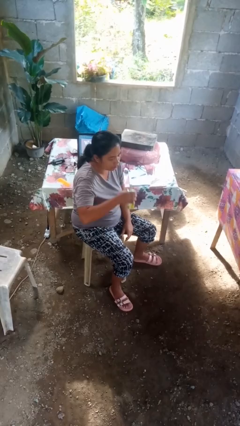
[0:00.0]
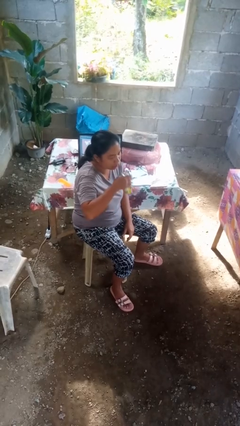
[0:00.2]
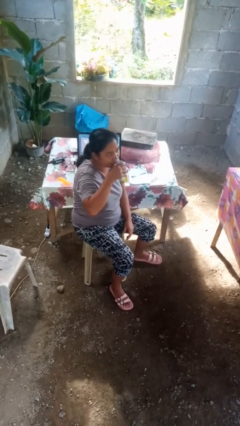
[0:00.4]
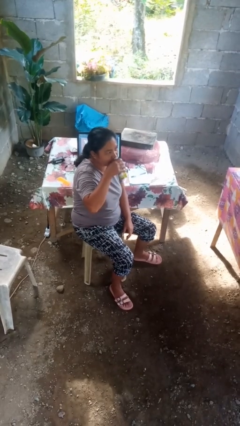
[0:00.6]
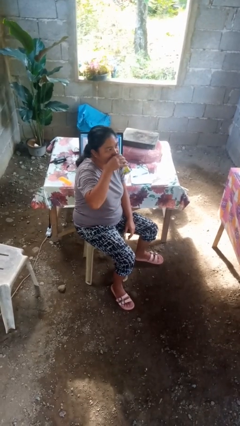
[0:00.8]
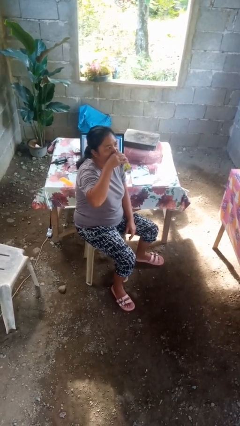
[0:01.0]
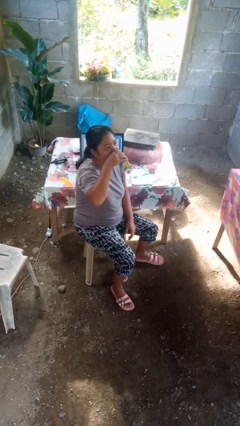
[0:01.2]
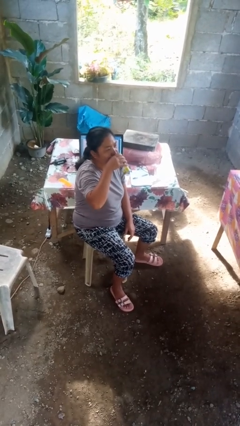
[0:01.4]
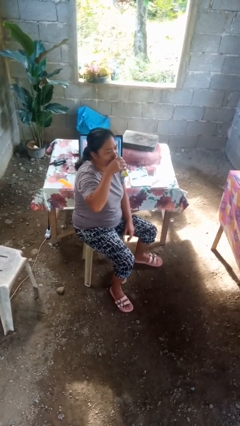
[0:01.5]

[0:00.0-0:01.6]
person drinks from beverage can

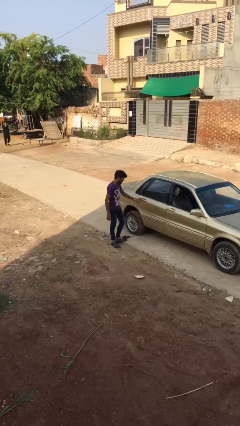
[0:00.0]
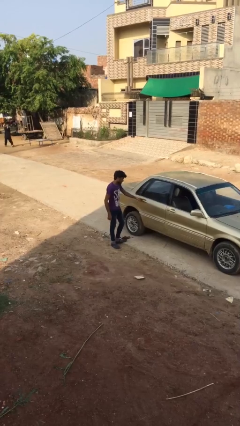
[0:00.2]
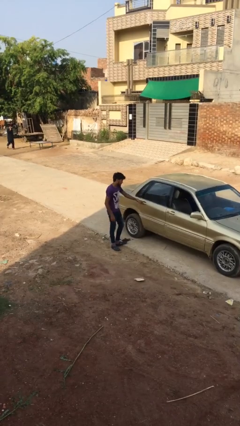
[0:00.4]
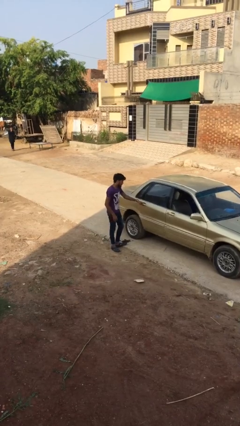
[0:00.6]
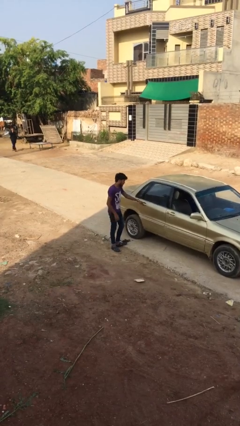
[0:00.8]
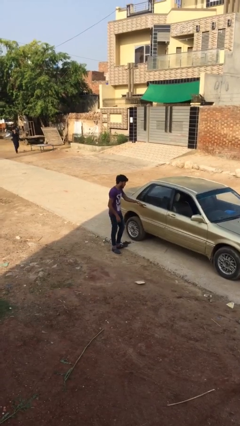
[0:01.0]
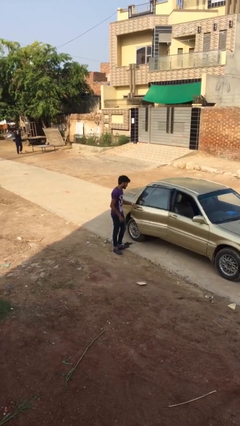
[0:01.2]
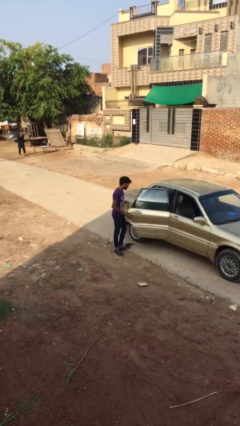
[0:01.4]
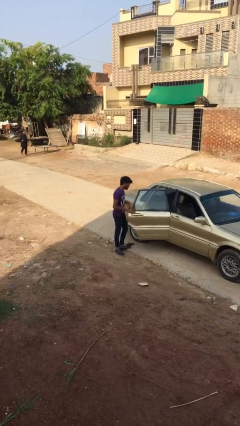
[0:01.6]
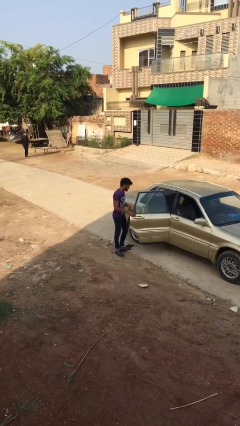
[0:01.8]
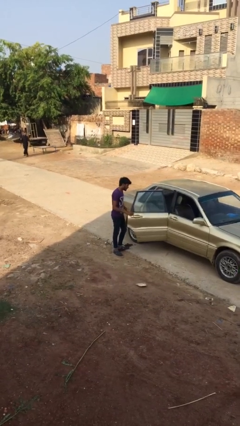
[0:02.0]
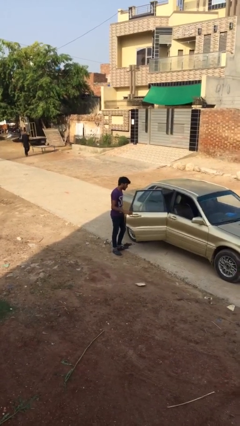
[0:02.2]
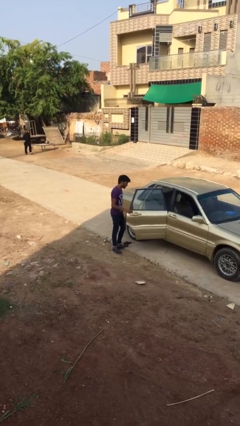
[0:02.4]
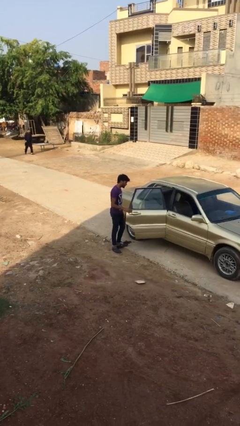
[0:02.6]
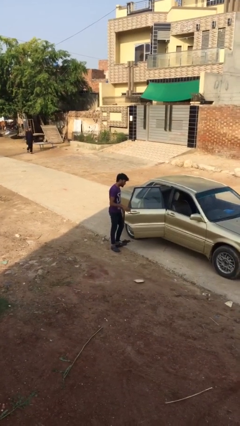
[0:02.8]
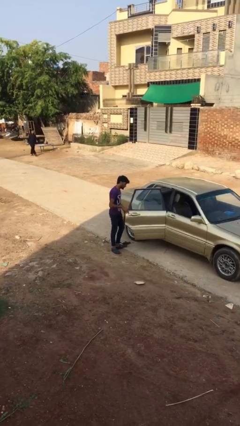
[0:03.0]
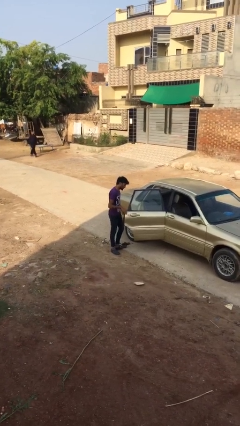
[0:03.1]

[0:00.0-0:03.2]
person opens car door

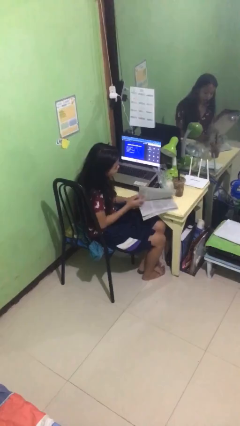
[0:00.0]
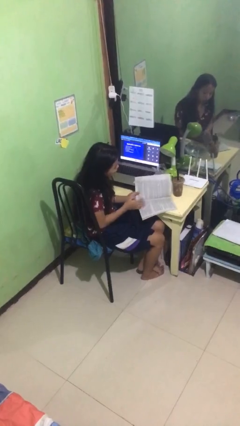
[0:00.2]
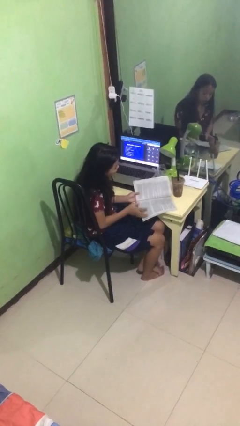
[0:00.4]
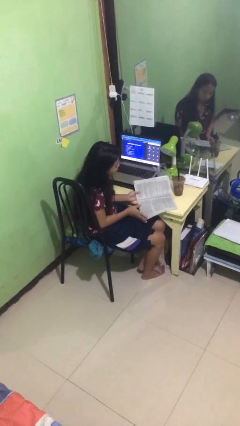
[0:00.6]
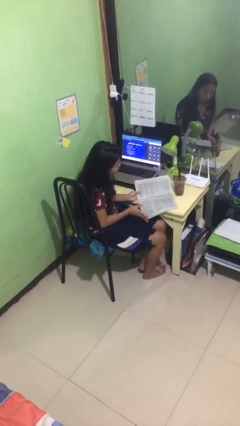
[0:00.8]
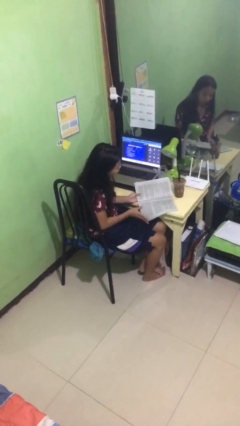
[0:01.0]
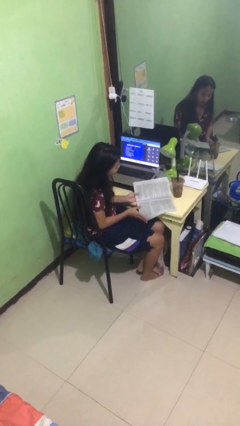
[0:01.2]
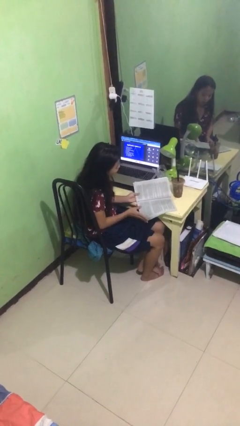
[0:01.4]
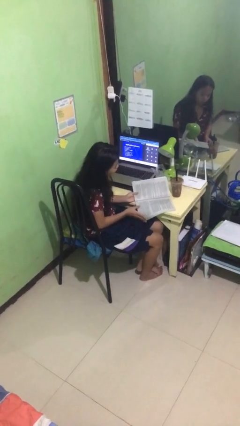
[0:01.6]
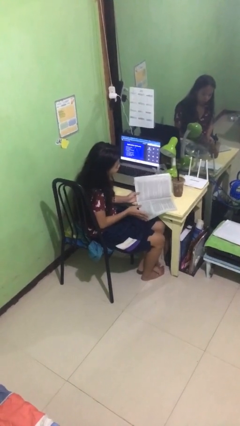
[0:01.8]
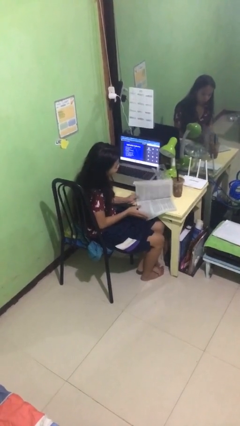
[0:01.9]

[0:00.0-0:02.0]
person reads document

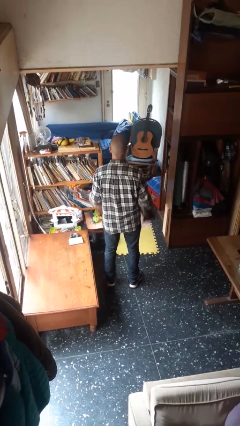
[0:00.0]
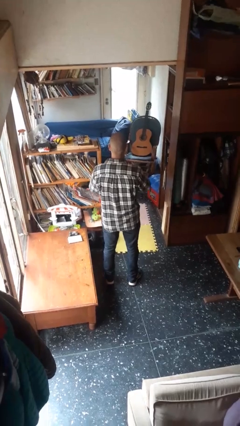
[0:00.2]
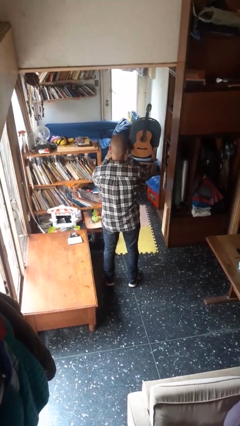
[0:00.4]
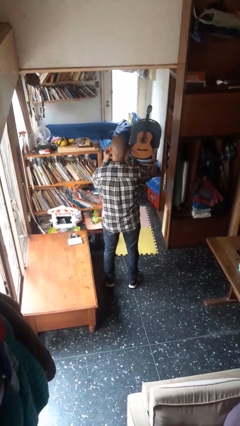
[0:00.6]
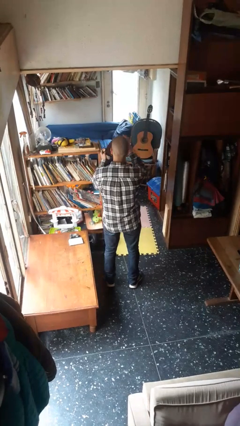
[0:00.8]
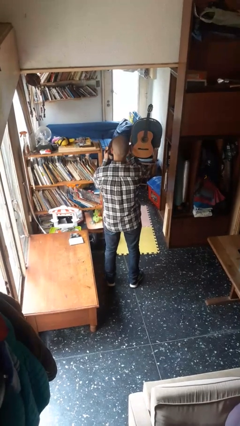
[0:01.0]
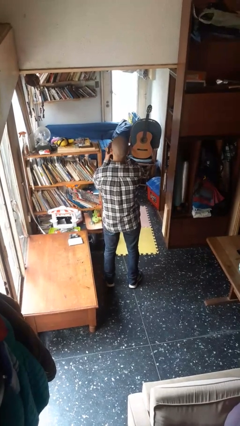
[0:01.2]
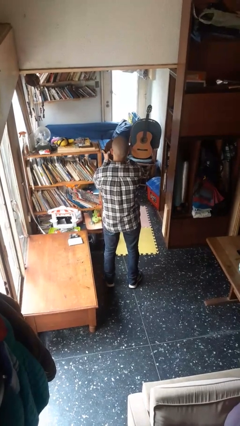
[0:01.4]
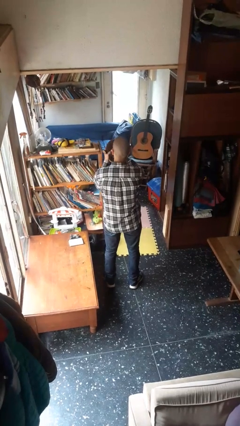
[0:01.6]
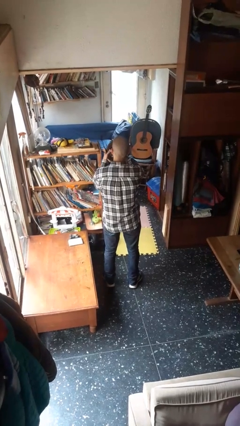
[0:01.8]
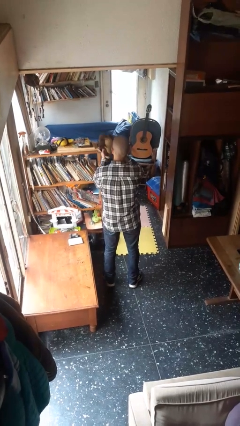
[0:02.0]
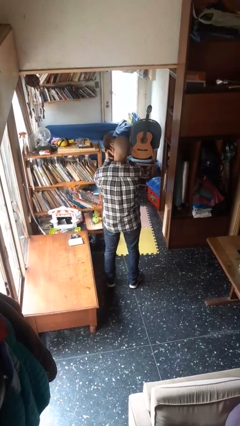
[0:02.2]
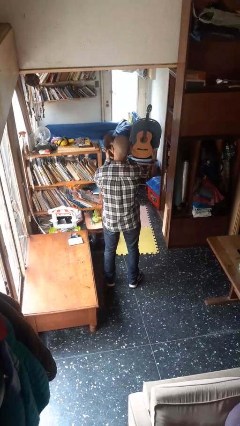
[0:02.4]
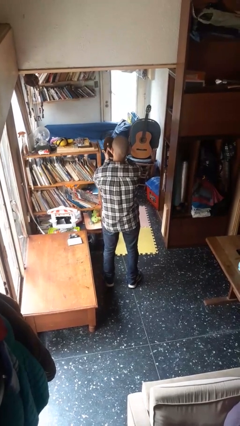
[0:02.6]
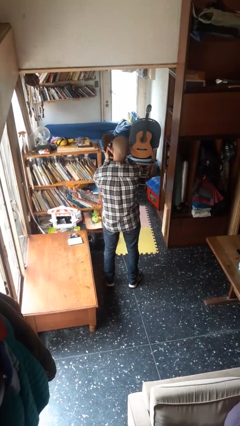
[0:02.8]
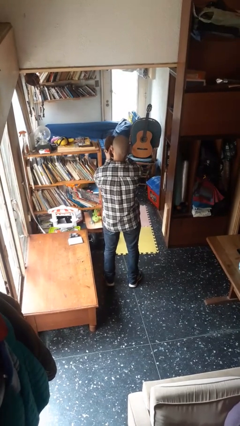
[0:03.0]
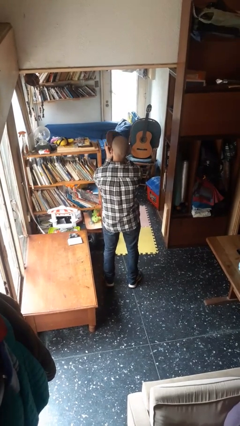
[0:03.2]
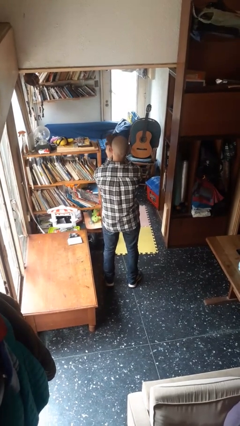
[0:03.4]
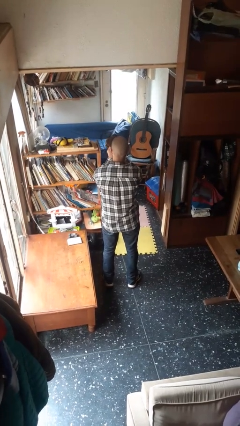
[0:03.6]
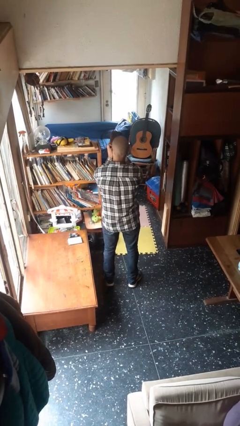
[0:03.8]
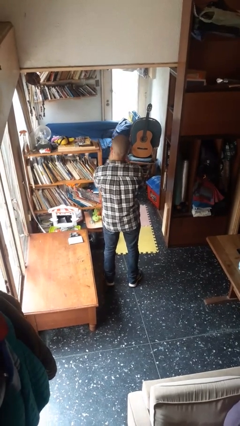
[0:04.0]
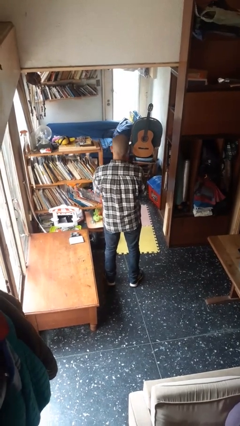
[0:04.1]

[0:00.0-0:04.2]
person squeezes object

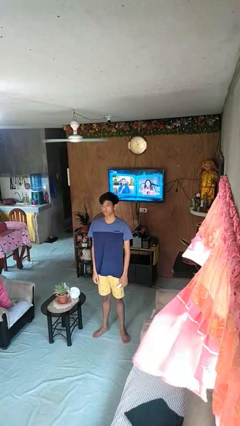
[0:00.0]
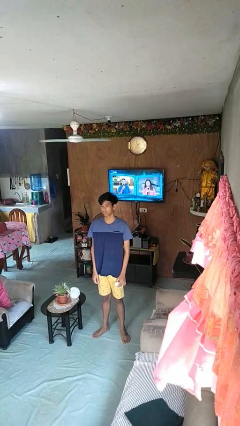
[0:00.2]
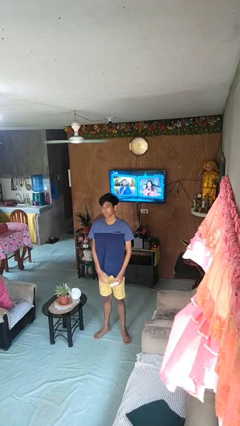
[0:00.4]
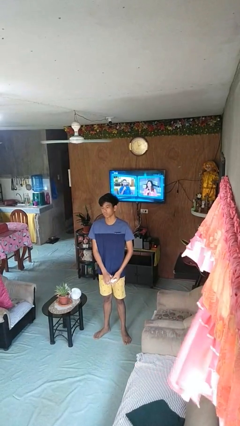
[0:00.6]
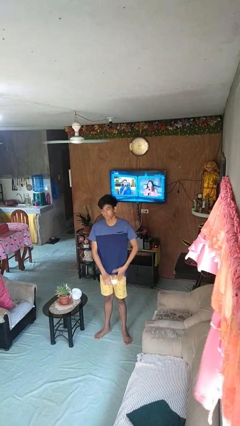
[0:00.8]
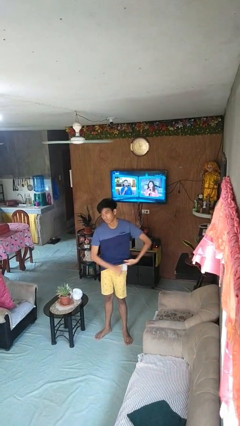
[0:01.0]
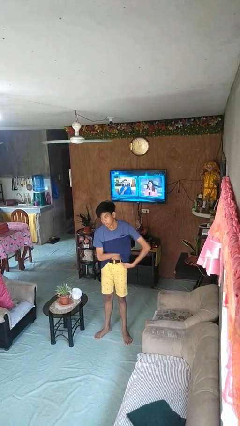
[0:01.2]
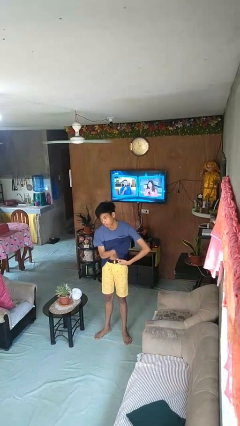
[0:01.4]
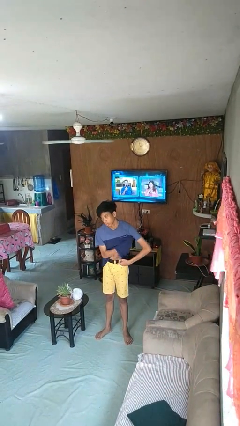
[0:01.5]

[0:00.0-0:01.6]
person applies deodorant

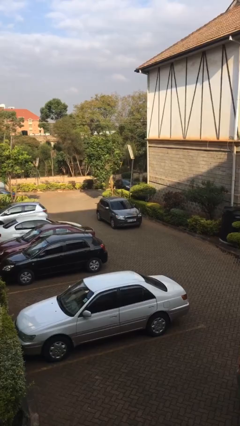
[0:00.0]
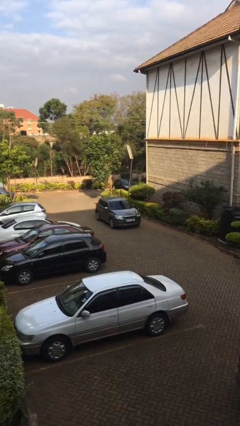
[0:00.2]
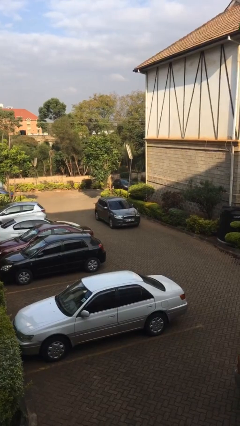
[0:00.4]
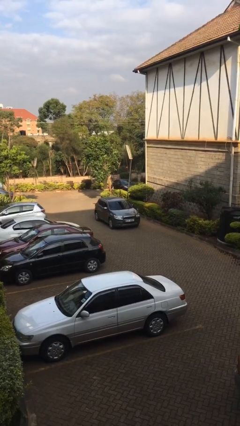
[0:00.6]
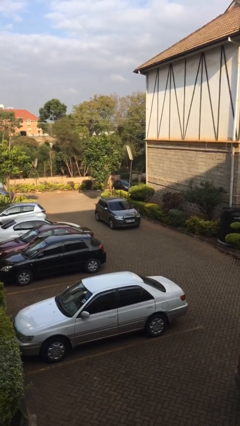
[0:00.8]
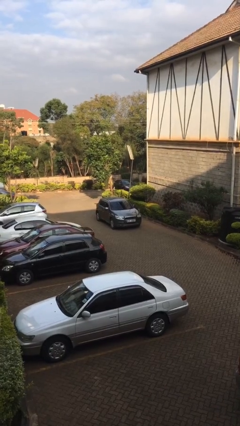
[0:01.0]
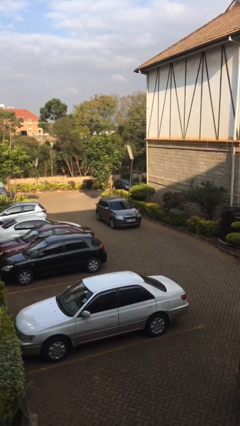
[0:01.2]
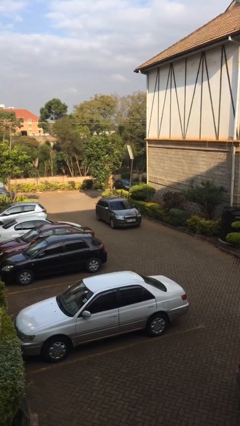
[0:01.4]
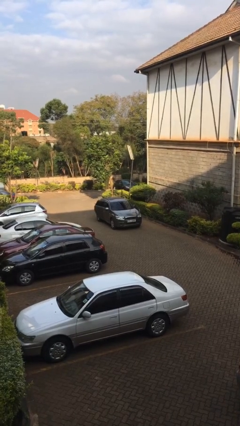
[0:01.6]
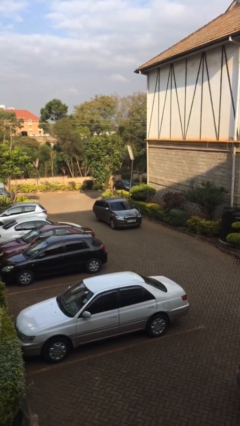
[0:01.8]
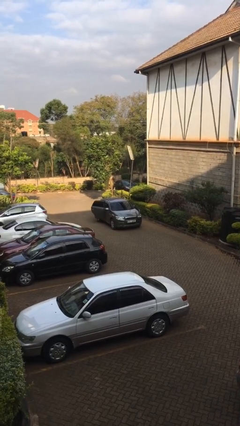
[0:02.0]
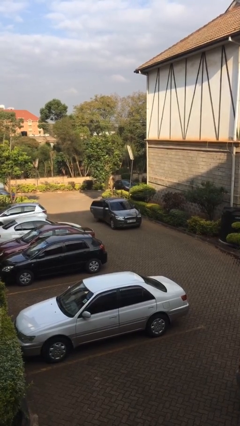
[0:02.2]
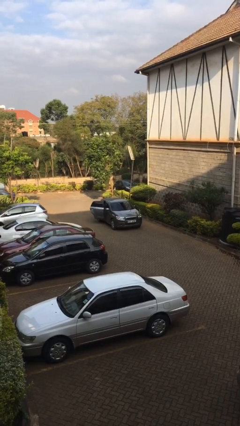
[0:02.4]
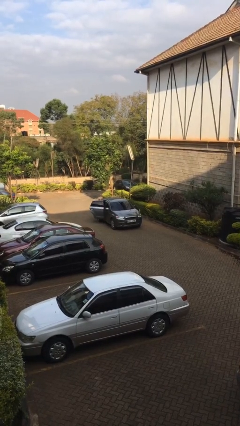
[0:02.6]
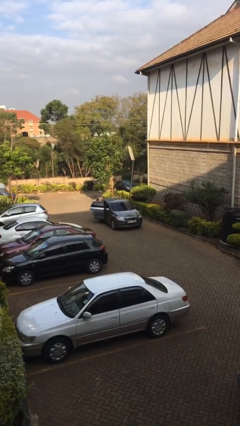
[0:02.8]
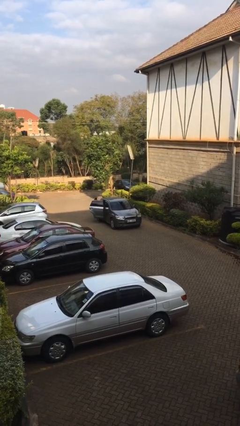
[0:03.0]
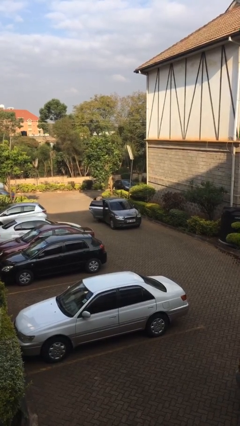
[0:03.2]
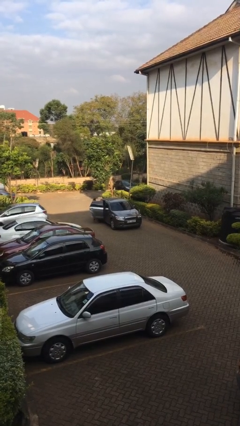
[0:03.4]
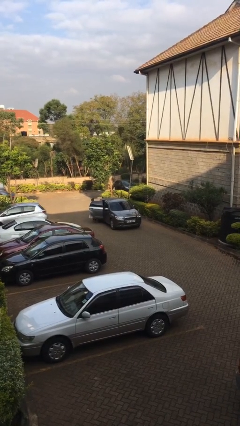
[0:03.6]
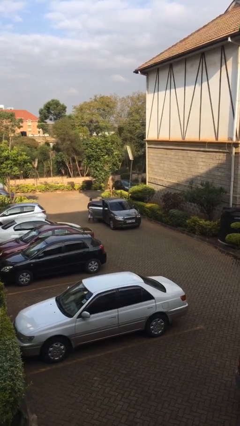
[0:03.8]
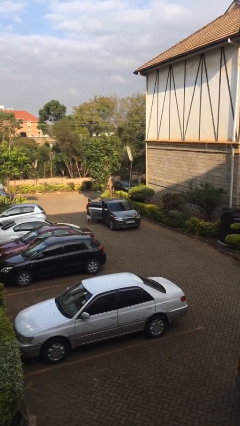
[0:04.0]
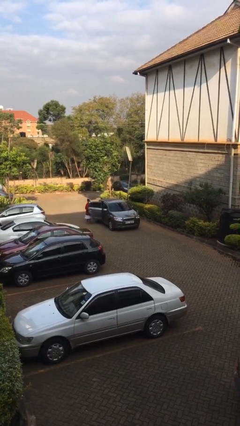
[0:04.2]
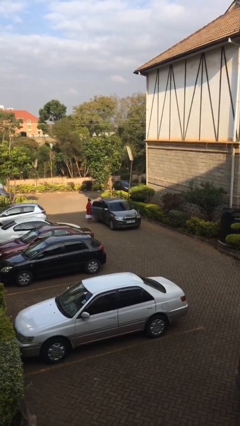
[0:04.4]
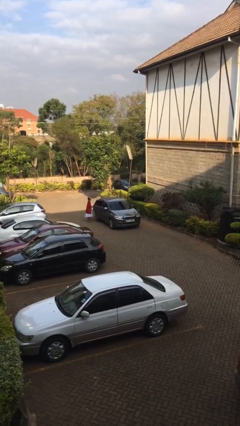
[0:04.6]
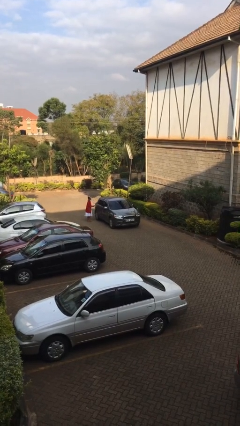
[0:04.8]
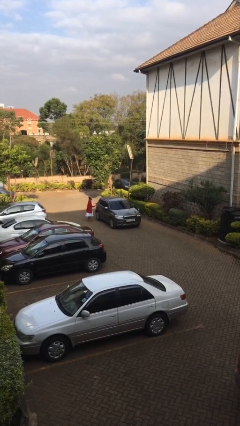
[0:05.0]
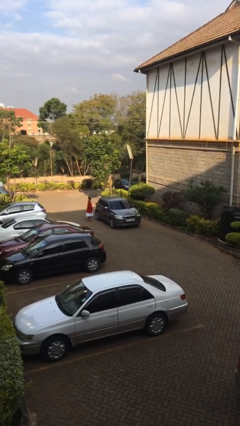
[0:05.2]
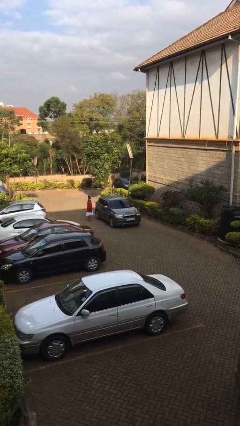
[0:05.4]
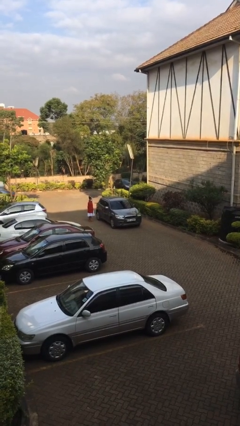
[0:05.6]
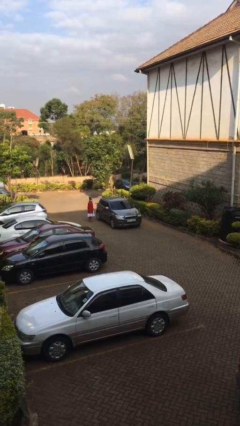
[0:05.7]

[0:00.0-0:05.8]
car drops off person
